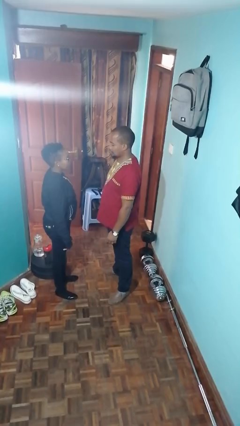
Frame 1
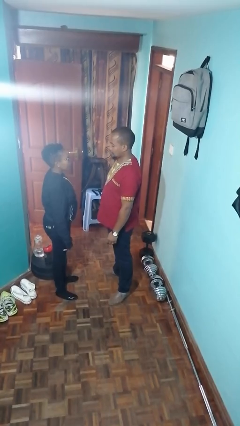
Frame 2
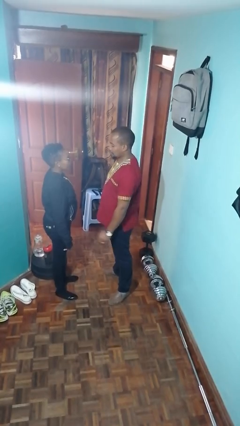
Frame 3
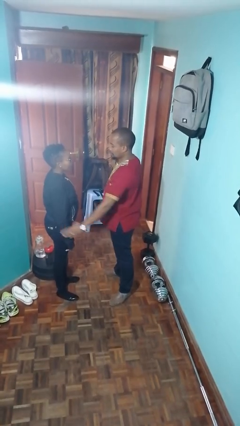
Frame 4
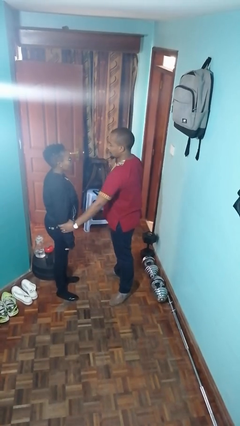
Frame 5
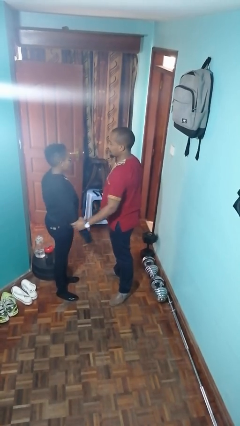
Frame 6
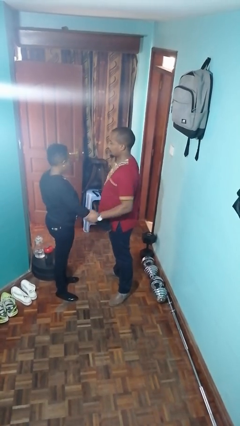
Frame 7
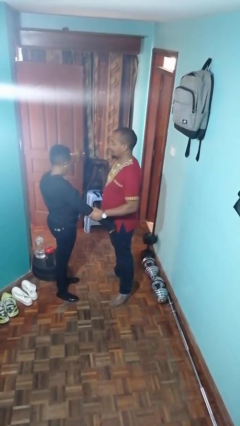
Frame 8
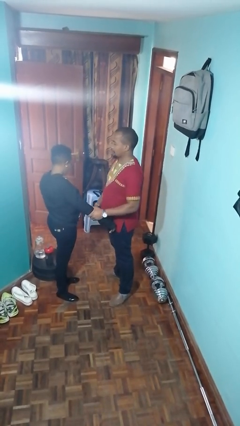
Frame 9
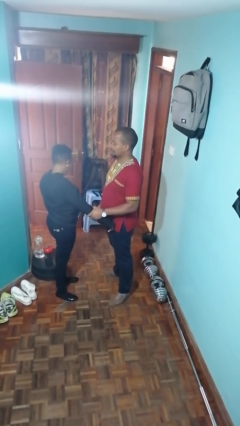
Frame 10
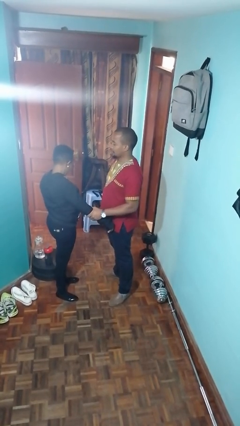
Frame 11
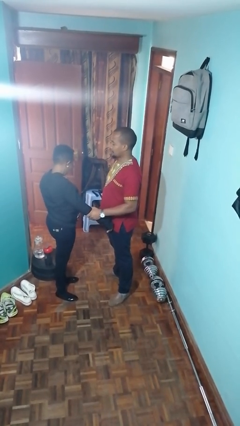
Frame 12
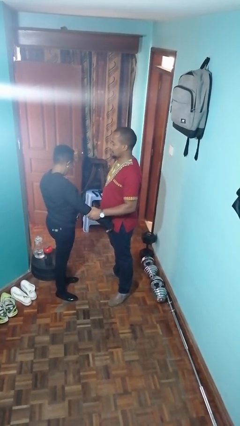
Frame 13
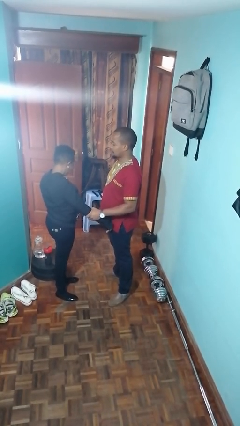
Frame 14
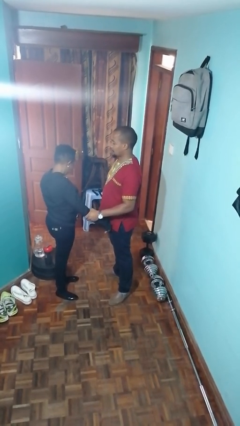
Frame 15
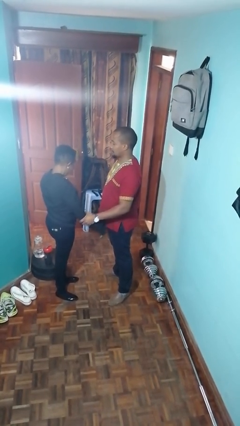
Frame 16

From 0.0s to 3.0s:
person grabs person by forearm

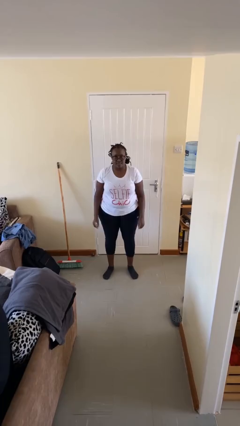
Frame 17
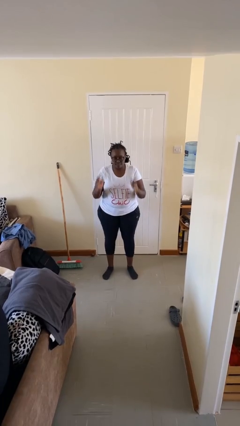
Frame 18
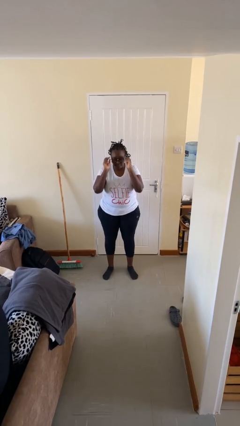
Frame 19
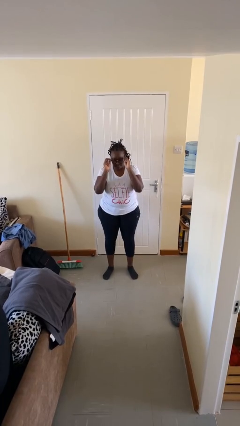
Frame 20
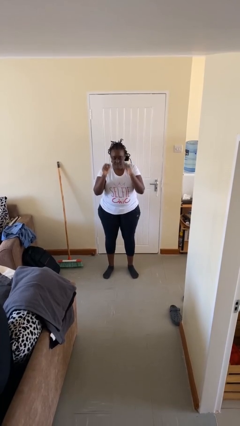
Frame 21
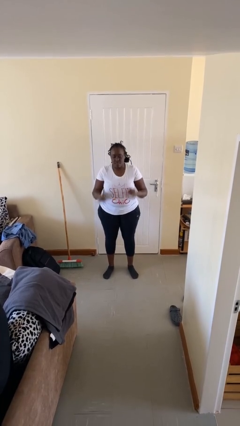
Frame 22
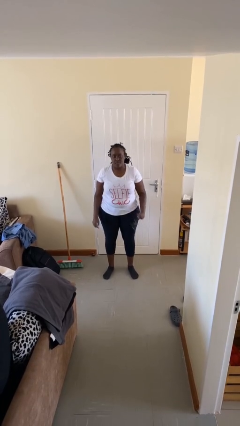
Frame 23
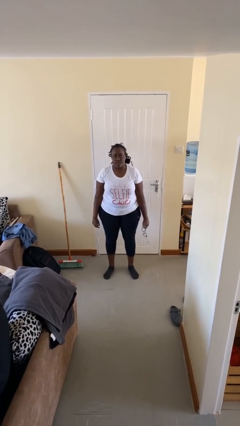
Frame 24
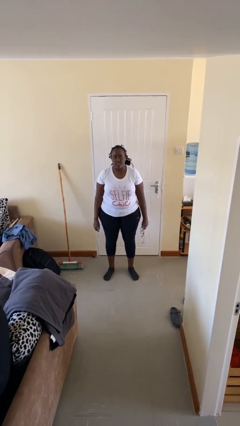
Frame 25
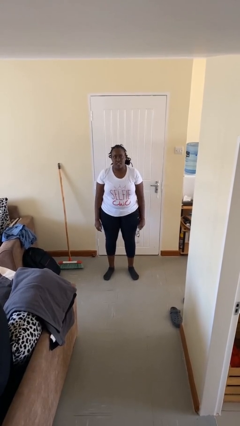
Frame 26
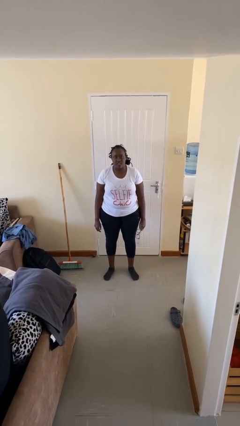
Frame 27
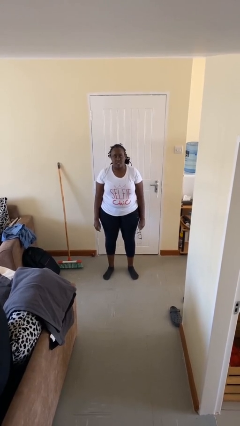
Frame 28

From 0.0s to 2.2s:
person takes off glasses

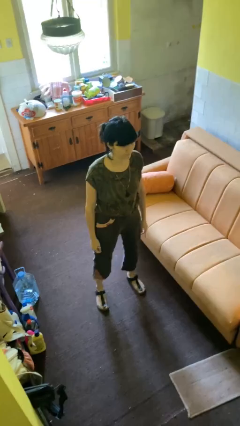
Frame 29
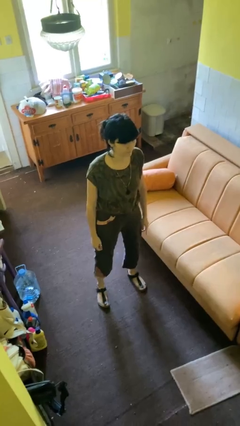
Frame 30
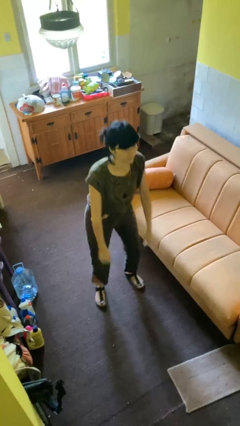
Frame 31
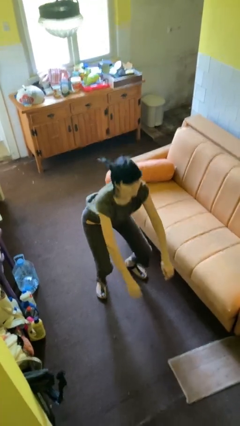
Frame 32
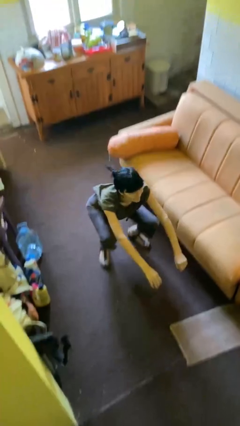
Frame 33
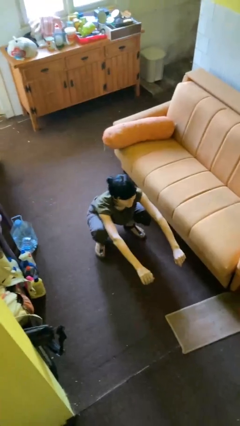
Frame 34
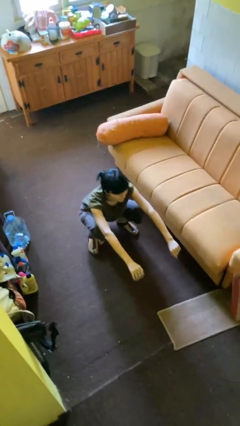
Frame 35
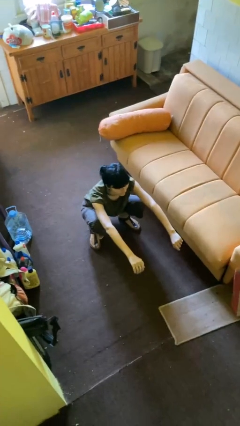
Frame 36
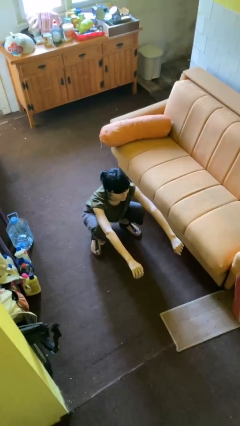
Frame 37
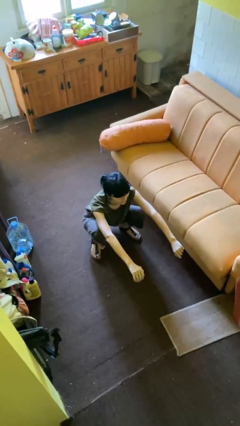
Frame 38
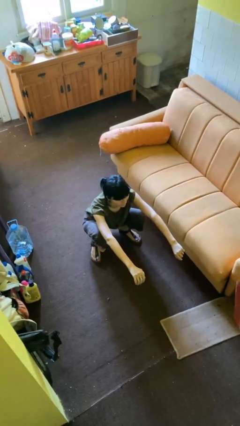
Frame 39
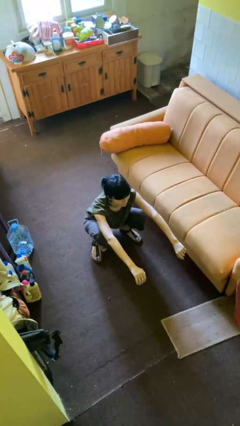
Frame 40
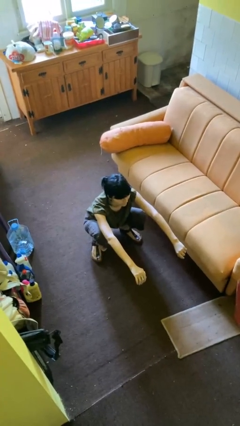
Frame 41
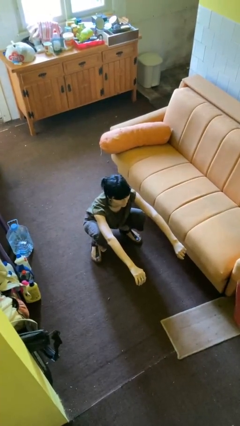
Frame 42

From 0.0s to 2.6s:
person squats

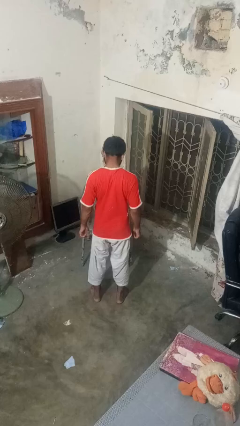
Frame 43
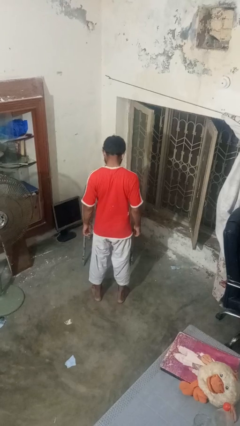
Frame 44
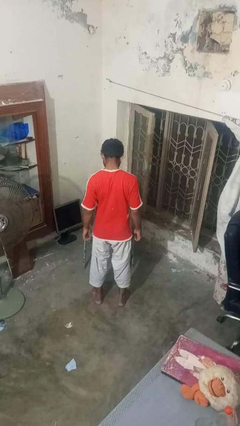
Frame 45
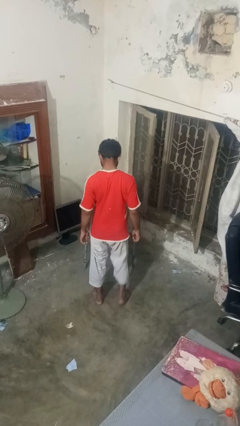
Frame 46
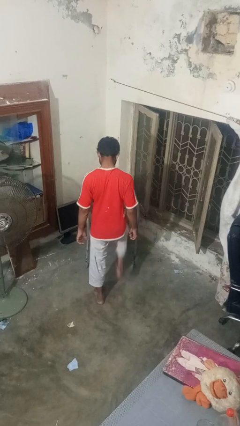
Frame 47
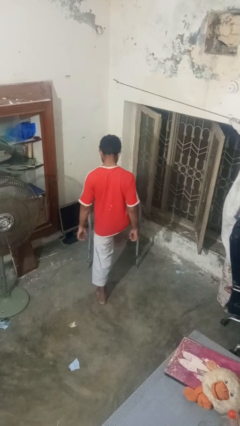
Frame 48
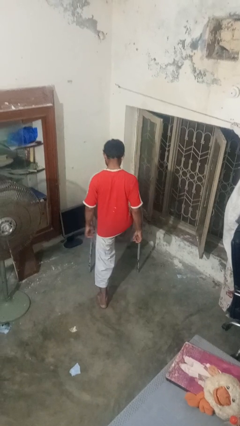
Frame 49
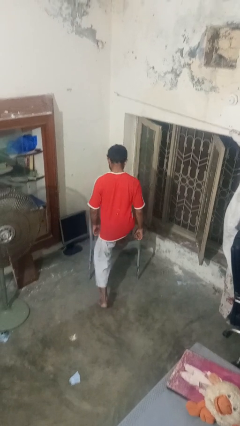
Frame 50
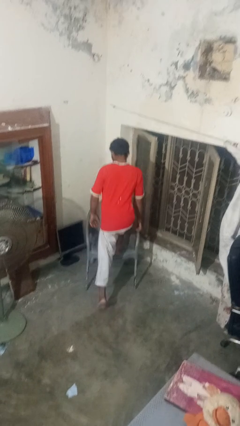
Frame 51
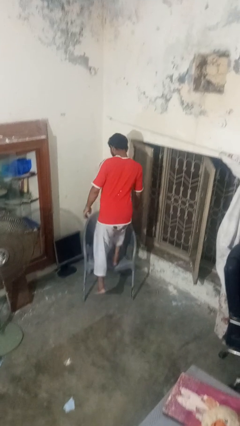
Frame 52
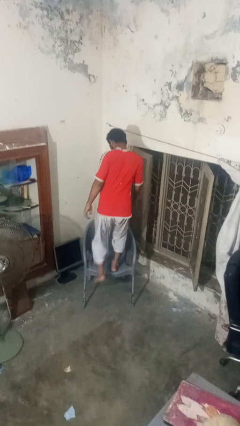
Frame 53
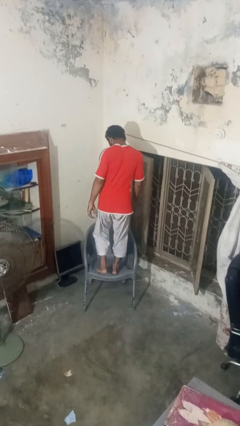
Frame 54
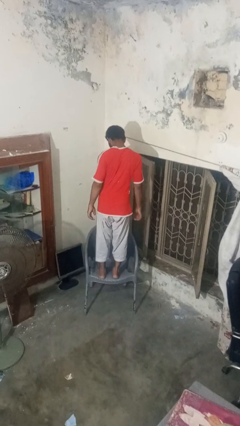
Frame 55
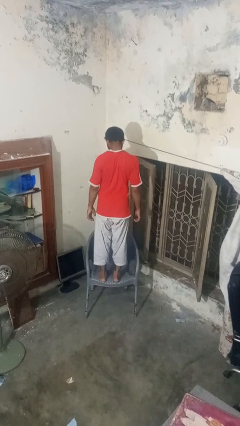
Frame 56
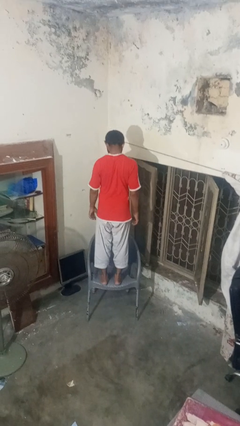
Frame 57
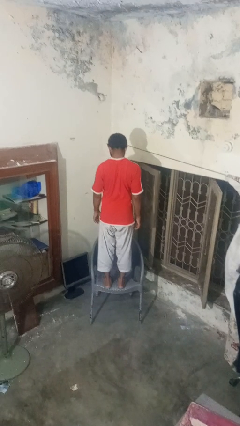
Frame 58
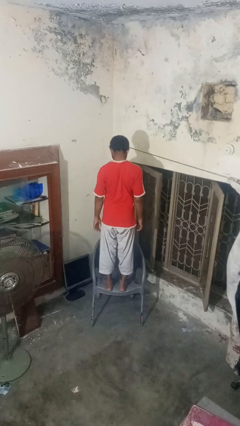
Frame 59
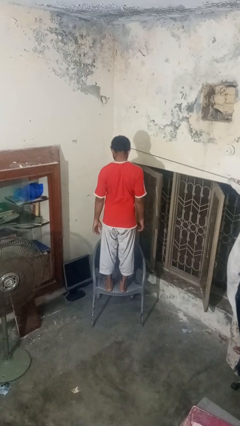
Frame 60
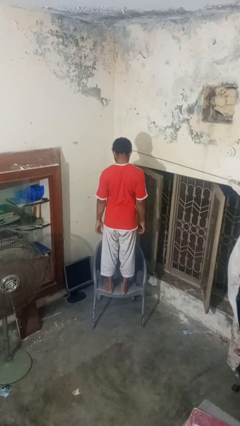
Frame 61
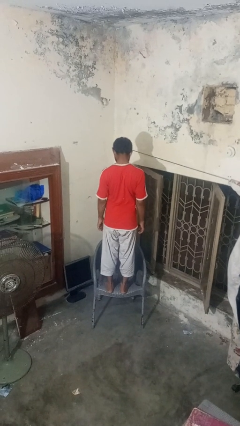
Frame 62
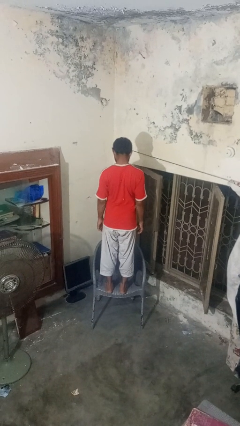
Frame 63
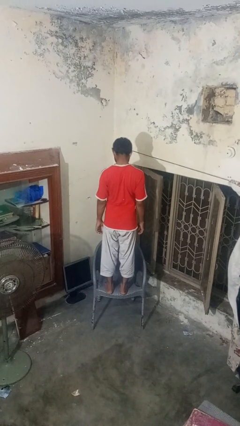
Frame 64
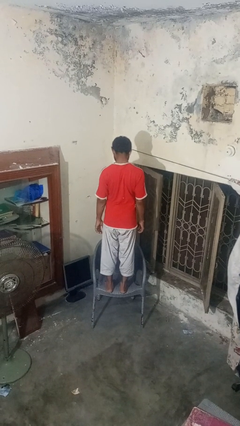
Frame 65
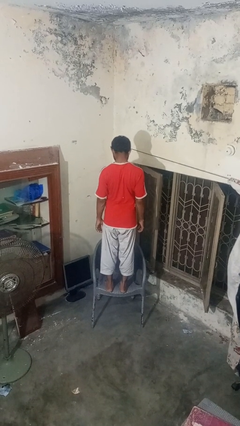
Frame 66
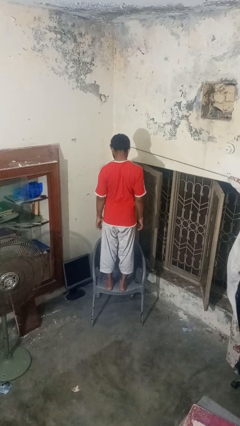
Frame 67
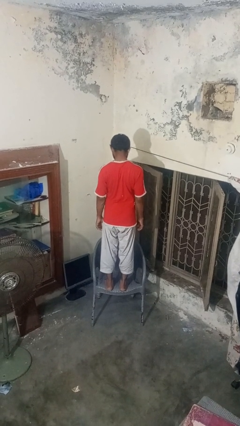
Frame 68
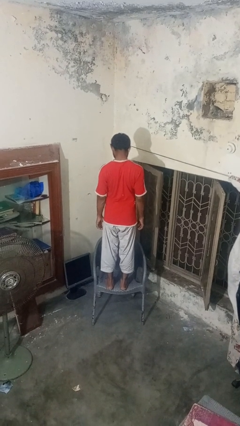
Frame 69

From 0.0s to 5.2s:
person climbs on chair

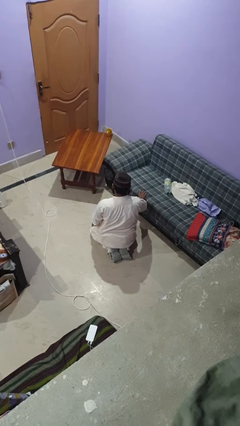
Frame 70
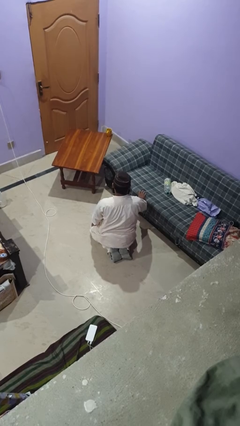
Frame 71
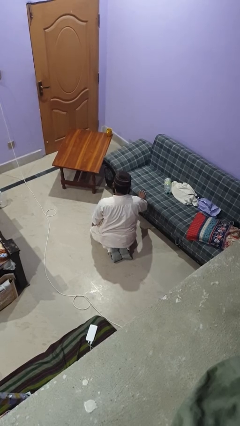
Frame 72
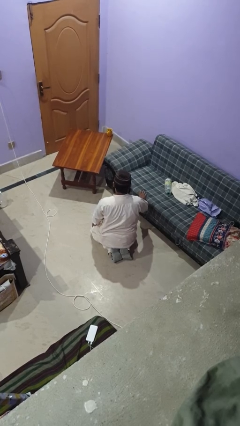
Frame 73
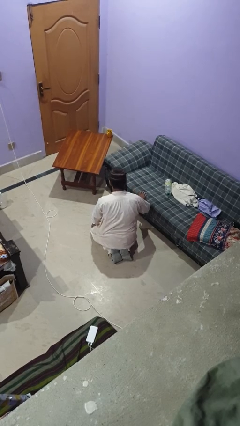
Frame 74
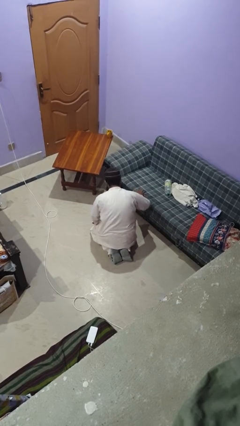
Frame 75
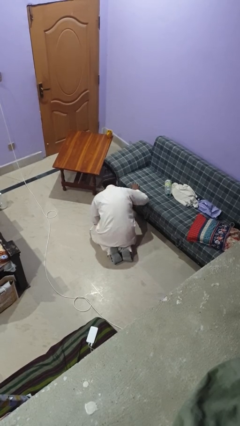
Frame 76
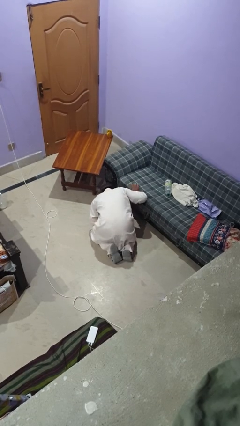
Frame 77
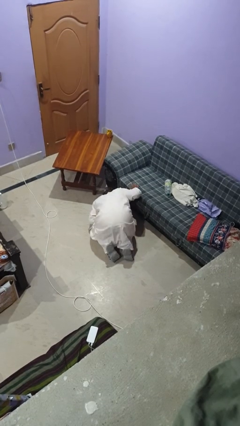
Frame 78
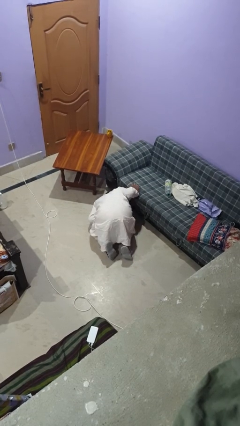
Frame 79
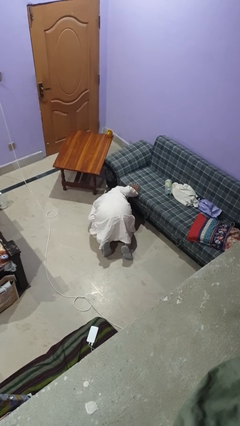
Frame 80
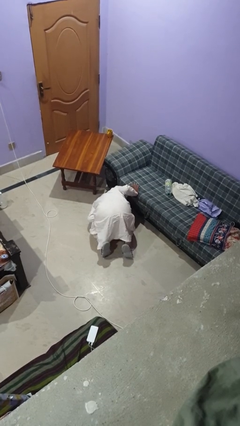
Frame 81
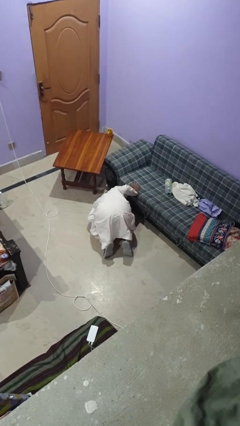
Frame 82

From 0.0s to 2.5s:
person searches under couch

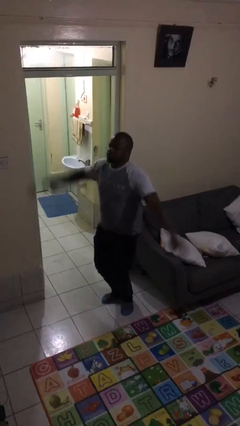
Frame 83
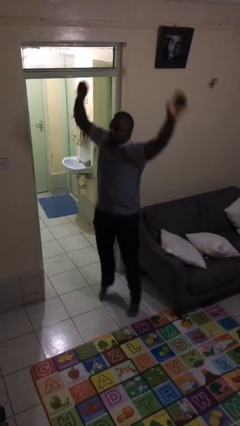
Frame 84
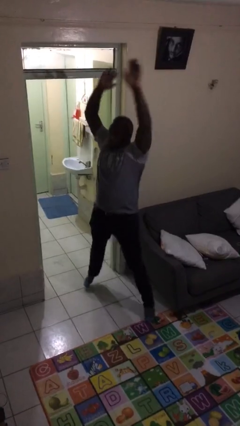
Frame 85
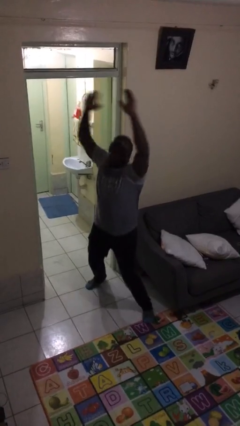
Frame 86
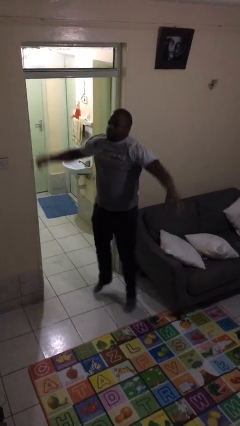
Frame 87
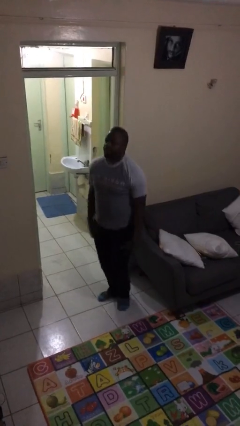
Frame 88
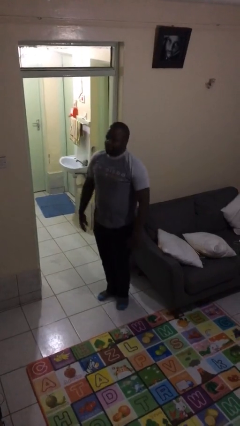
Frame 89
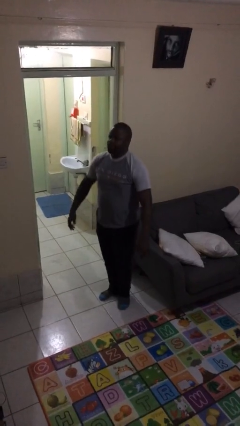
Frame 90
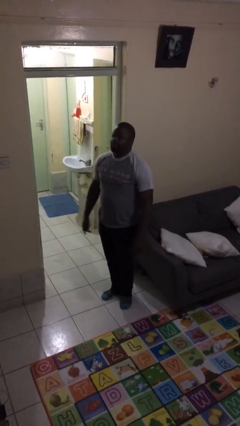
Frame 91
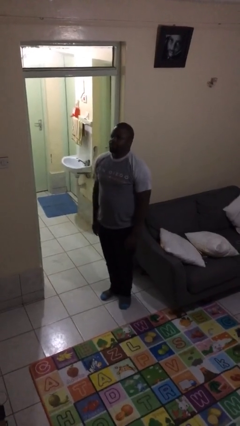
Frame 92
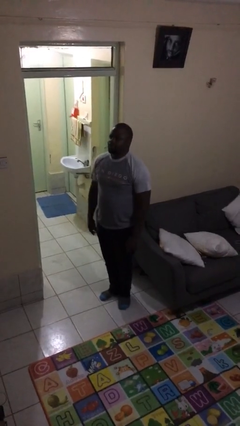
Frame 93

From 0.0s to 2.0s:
person exercises with jumping jacks
